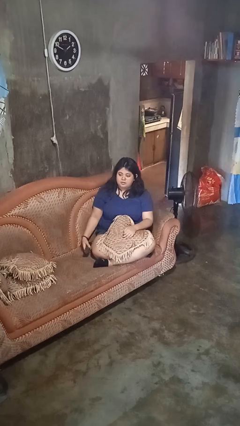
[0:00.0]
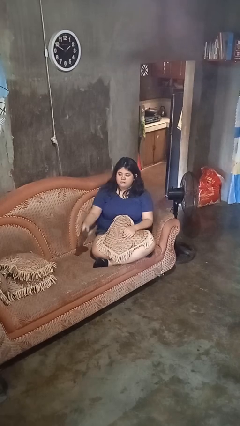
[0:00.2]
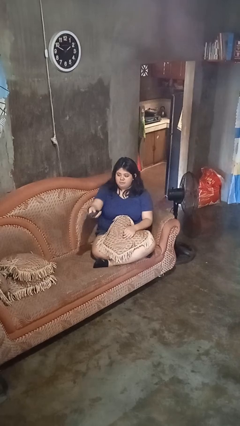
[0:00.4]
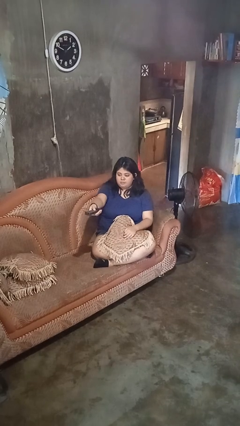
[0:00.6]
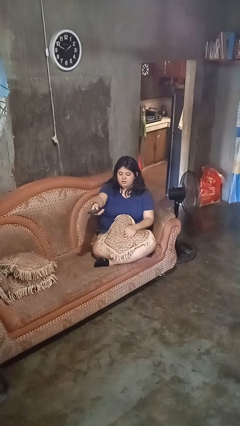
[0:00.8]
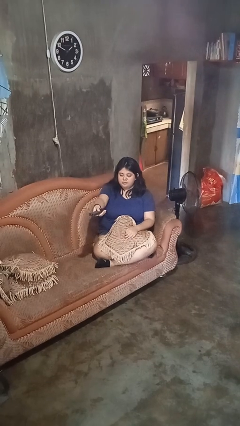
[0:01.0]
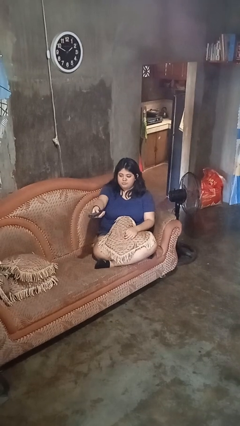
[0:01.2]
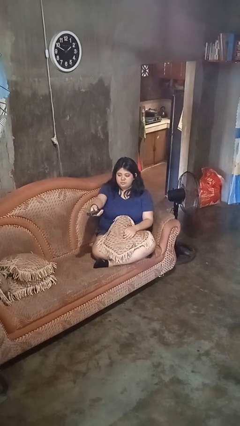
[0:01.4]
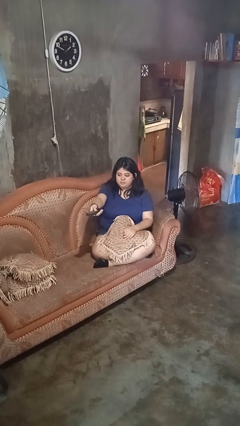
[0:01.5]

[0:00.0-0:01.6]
person uses television remote

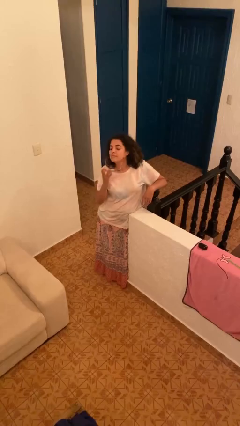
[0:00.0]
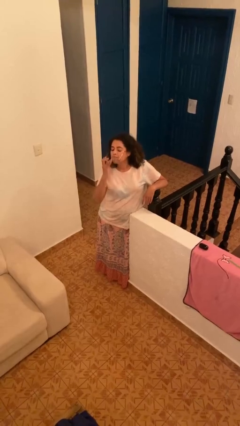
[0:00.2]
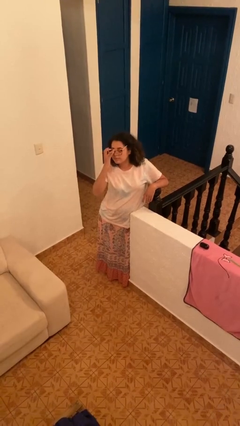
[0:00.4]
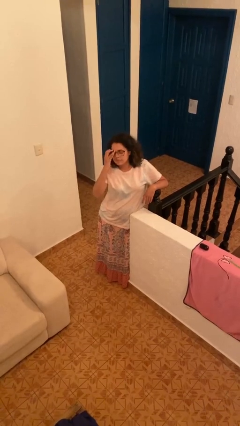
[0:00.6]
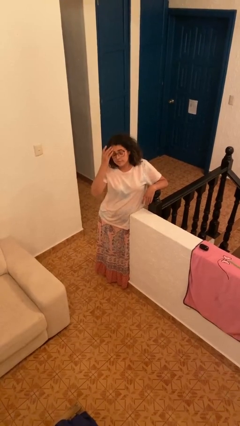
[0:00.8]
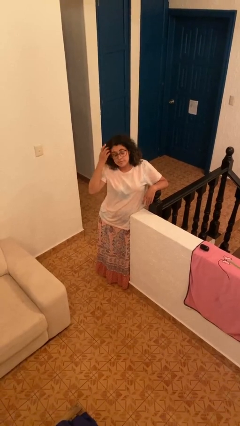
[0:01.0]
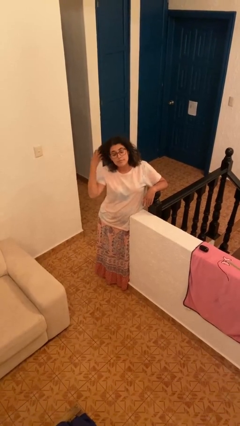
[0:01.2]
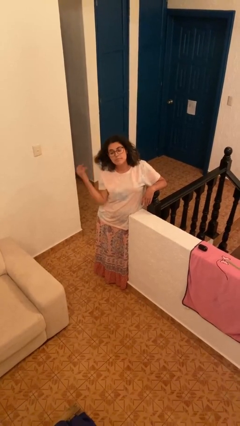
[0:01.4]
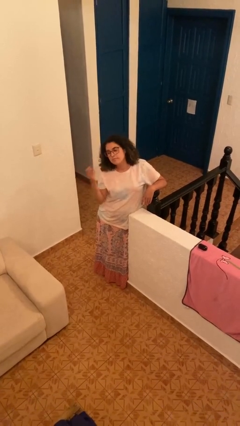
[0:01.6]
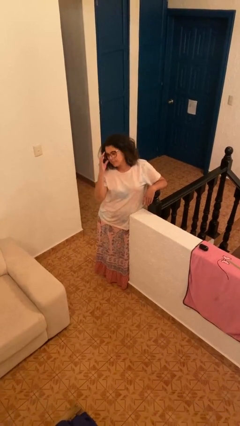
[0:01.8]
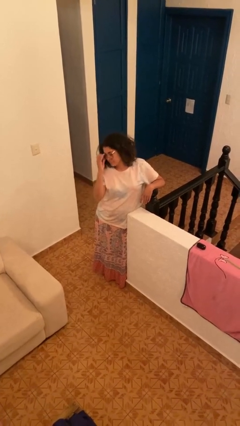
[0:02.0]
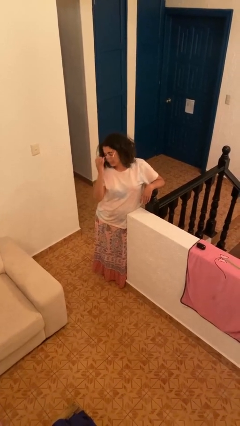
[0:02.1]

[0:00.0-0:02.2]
person puts on glasses

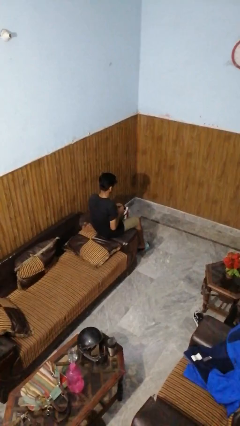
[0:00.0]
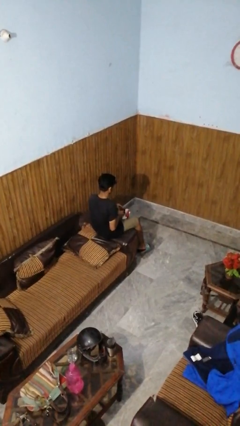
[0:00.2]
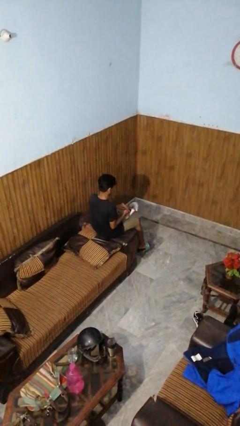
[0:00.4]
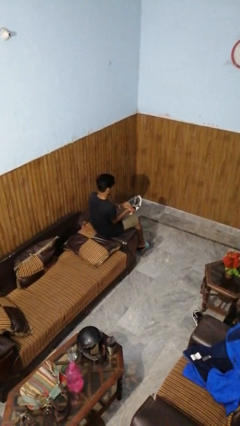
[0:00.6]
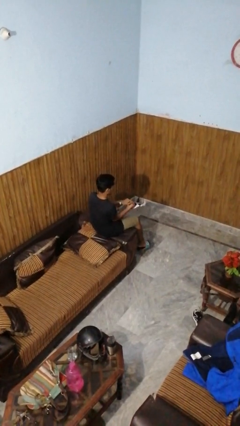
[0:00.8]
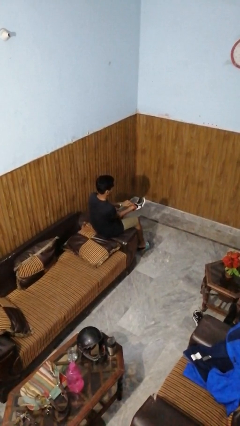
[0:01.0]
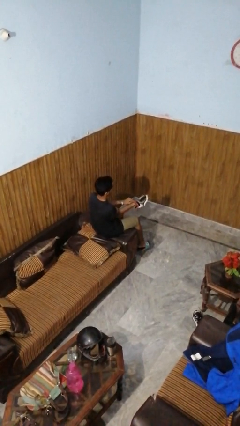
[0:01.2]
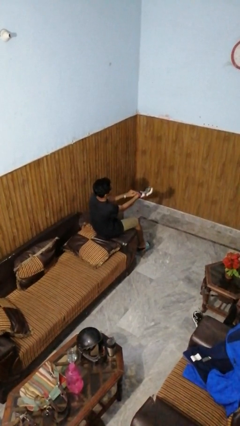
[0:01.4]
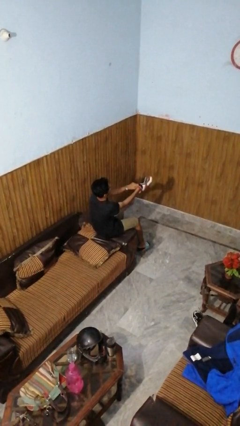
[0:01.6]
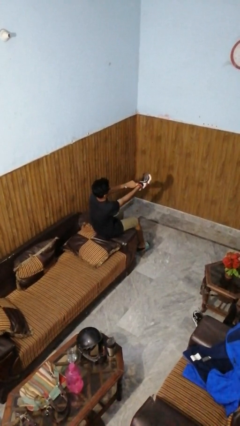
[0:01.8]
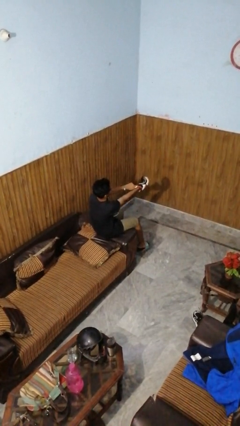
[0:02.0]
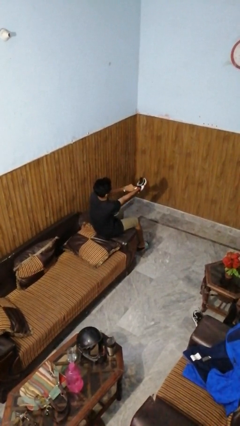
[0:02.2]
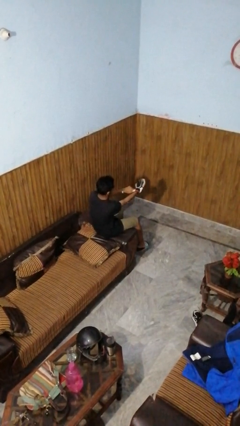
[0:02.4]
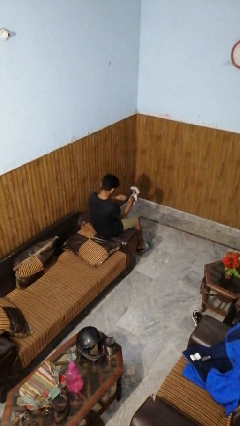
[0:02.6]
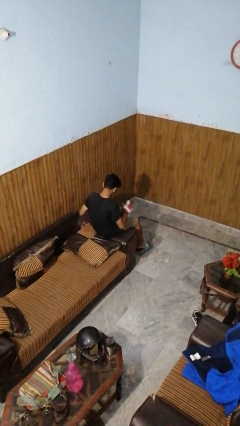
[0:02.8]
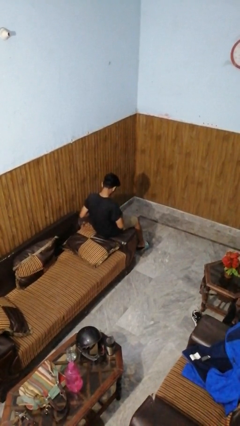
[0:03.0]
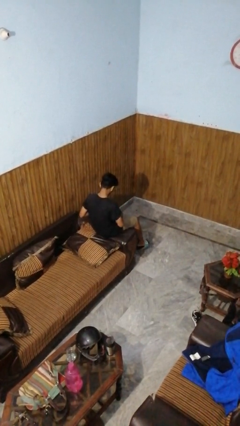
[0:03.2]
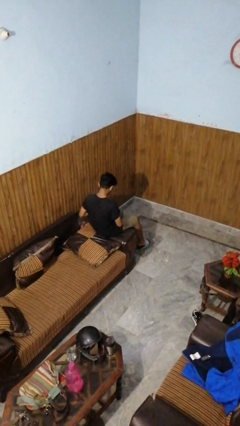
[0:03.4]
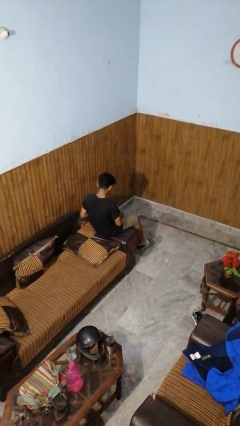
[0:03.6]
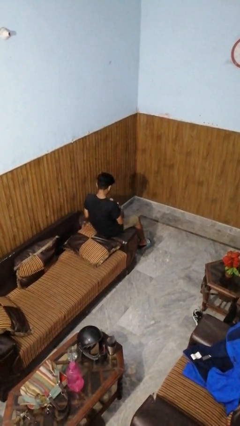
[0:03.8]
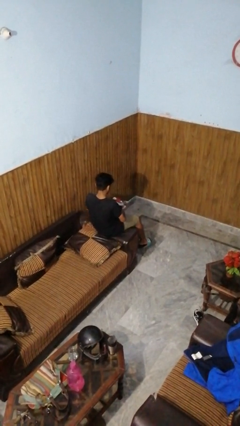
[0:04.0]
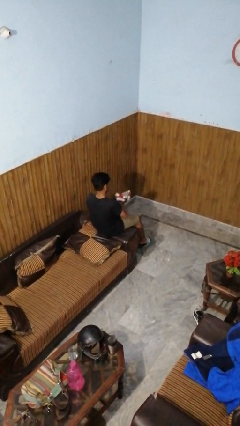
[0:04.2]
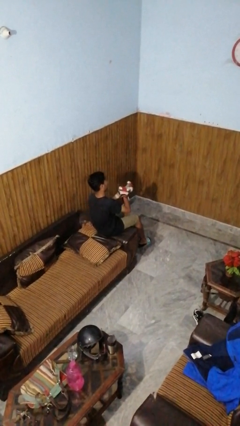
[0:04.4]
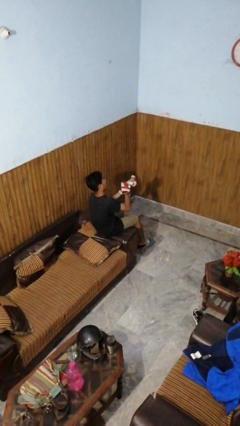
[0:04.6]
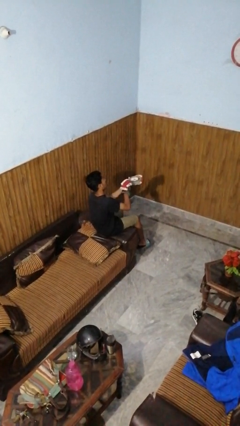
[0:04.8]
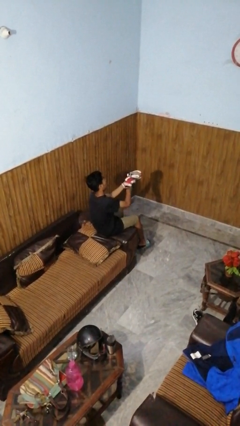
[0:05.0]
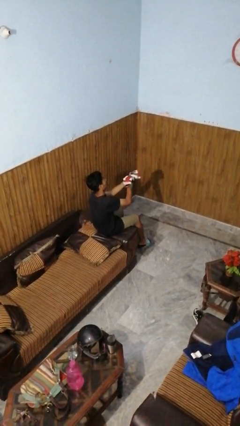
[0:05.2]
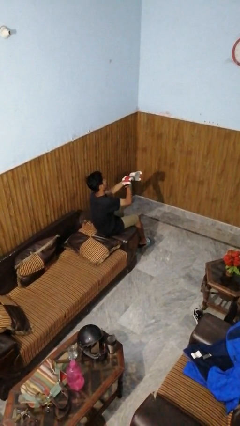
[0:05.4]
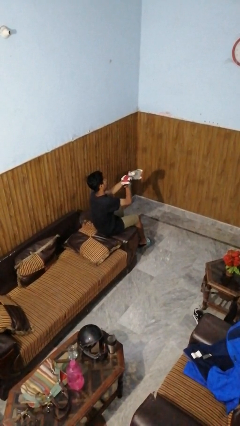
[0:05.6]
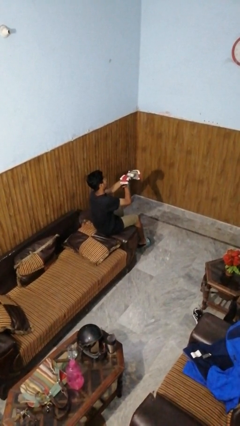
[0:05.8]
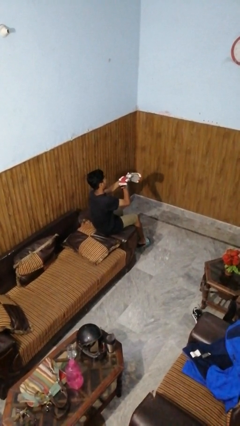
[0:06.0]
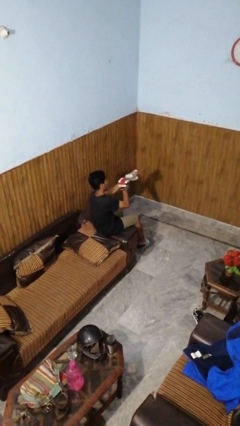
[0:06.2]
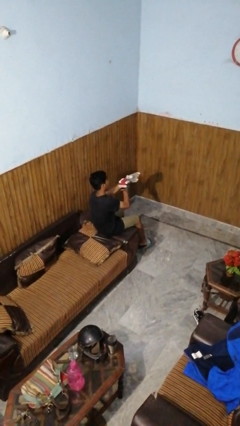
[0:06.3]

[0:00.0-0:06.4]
person puts on gloves

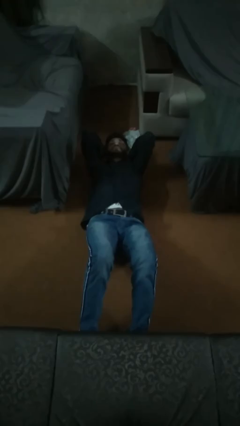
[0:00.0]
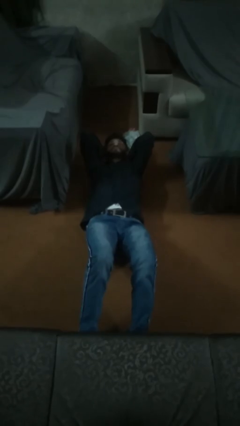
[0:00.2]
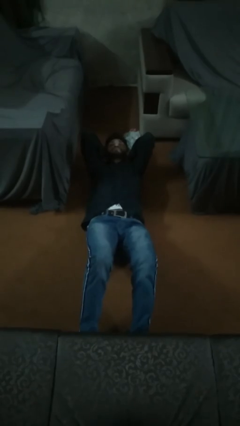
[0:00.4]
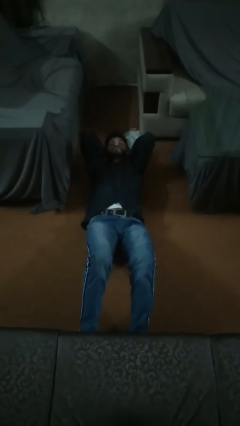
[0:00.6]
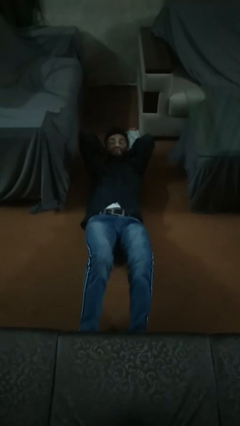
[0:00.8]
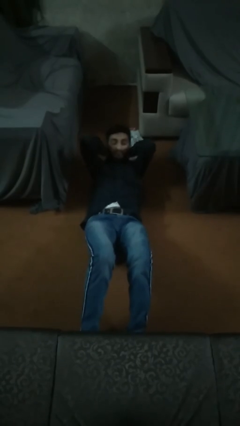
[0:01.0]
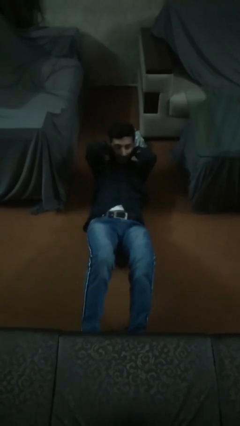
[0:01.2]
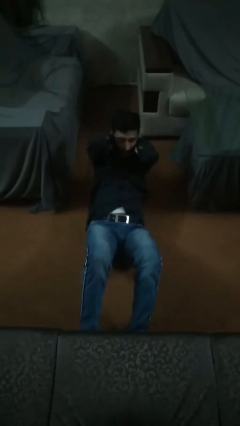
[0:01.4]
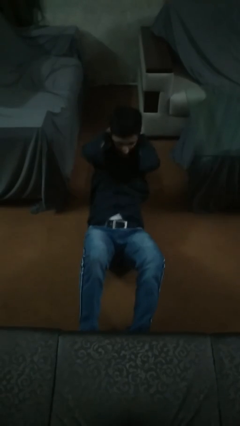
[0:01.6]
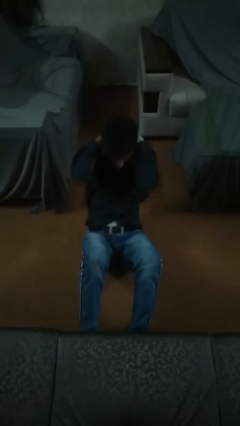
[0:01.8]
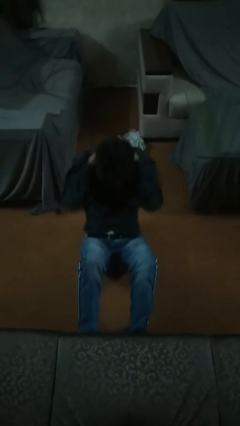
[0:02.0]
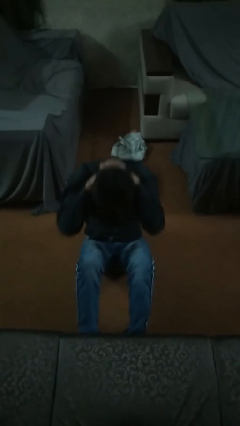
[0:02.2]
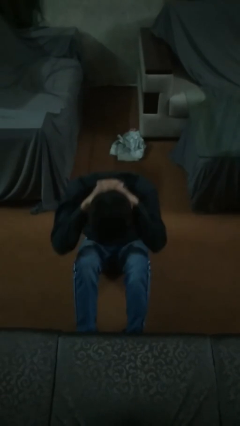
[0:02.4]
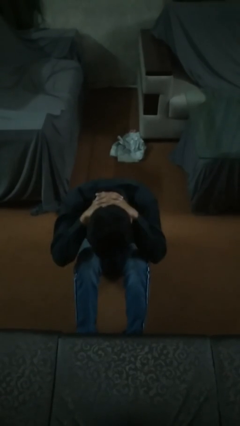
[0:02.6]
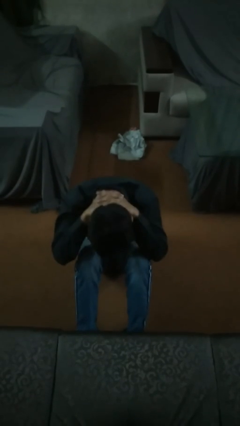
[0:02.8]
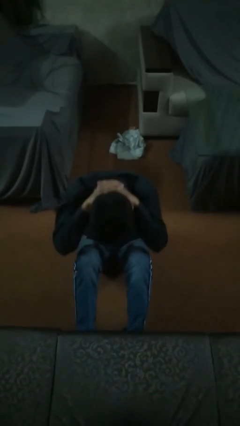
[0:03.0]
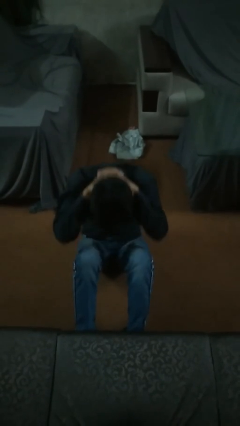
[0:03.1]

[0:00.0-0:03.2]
person exercises with situp

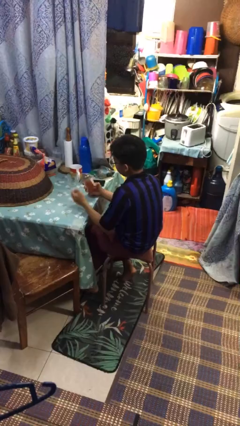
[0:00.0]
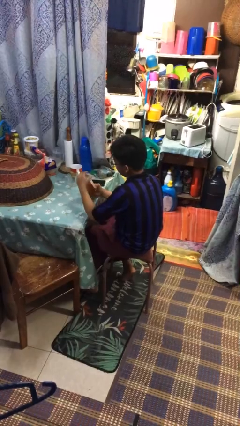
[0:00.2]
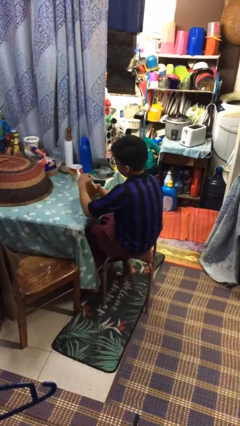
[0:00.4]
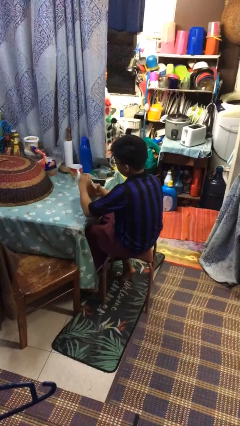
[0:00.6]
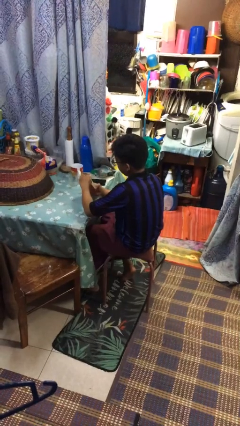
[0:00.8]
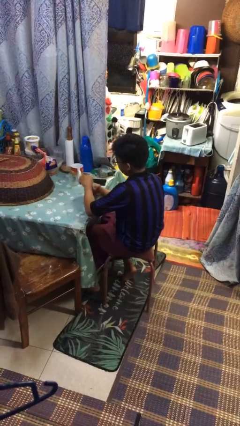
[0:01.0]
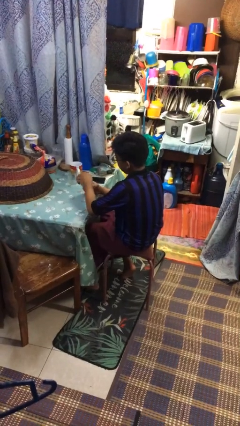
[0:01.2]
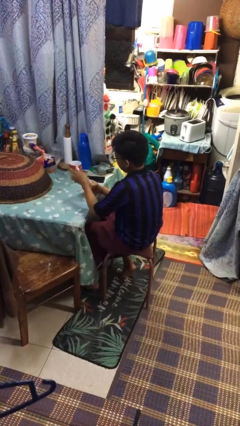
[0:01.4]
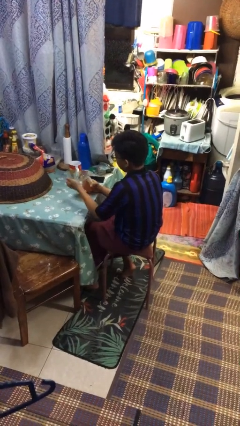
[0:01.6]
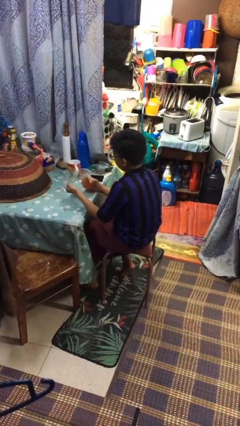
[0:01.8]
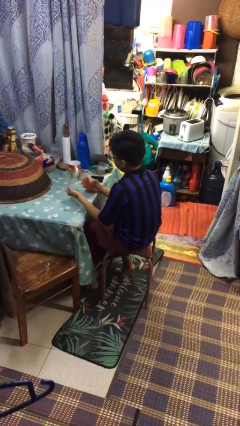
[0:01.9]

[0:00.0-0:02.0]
person opens jar

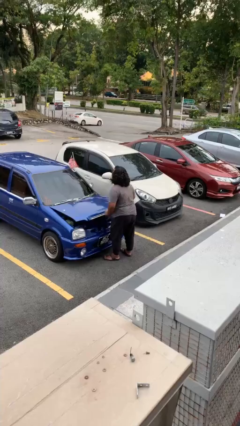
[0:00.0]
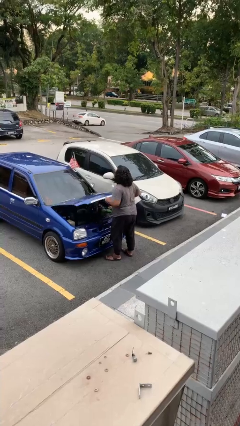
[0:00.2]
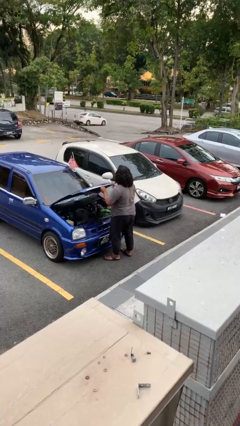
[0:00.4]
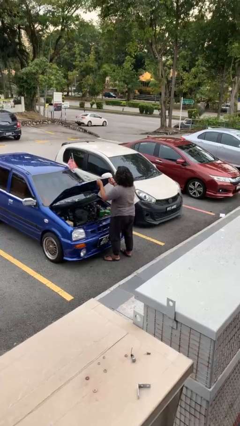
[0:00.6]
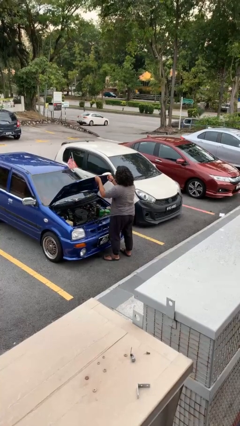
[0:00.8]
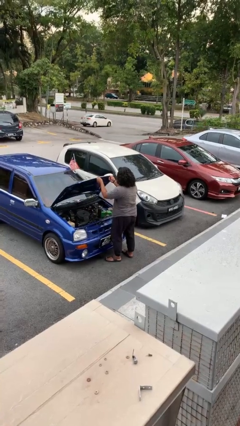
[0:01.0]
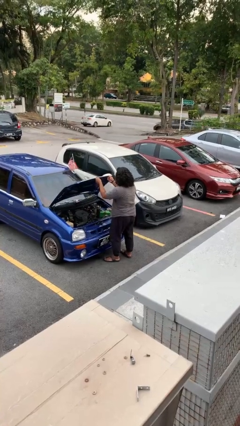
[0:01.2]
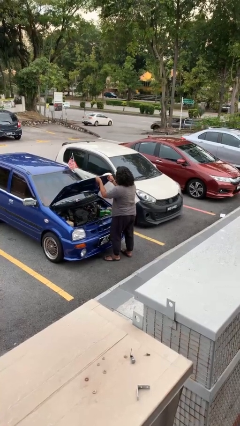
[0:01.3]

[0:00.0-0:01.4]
person opens car hood

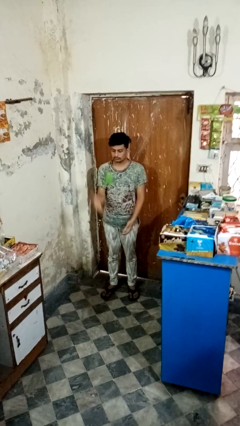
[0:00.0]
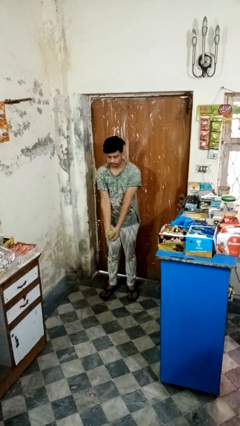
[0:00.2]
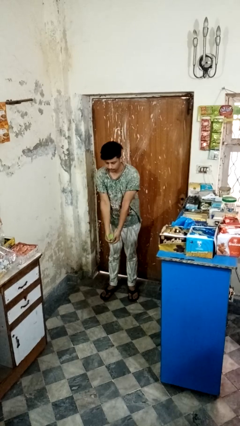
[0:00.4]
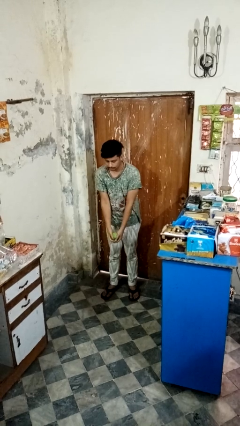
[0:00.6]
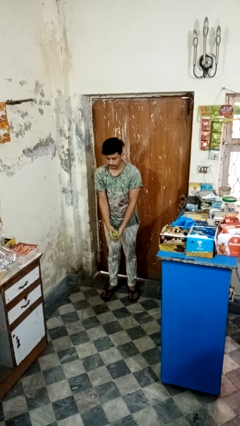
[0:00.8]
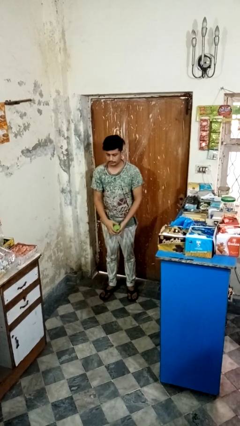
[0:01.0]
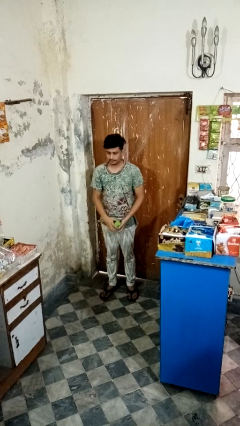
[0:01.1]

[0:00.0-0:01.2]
person catches dropped object
